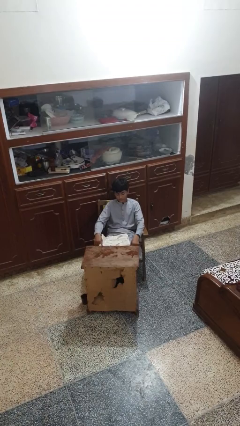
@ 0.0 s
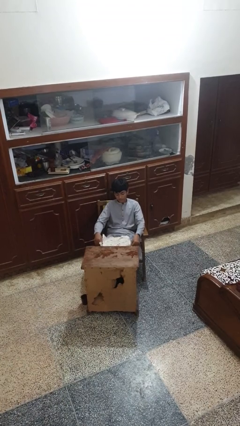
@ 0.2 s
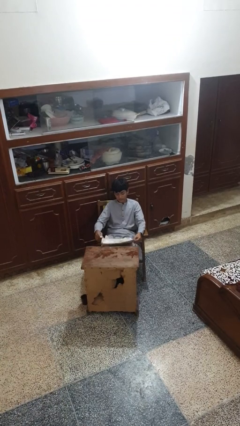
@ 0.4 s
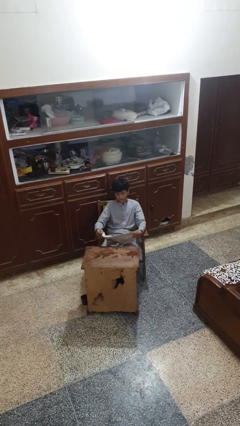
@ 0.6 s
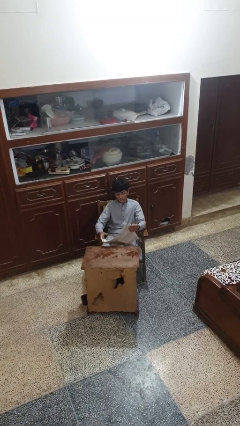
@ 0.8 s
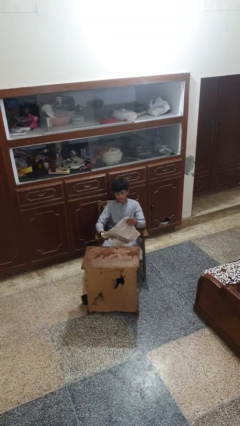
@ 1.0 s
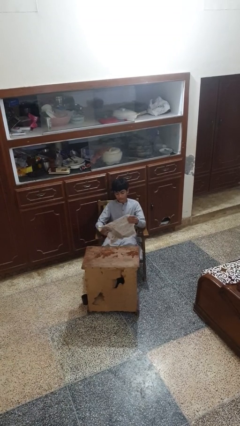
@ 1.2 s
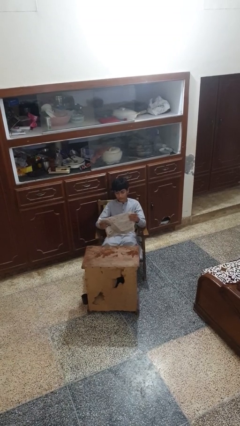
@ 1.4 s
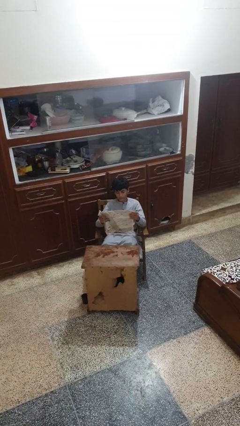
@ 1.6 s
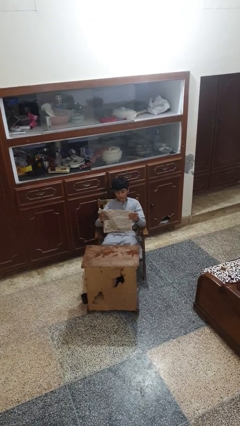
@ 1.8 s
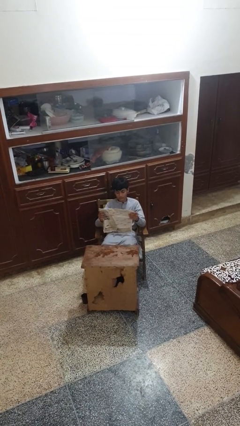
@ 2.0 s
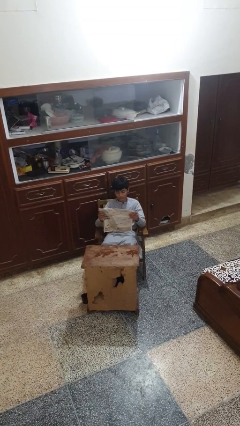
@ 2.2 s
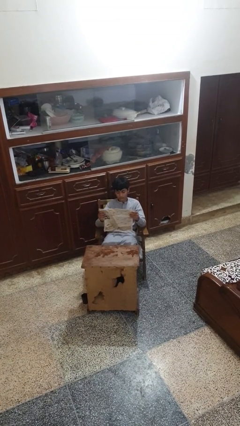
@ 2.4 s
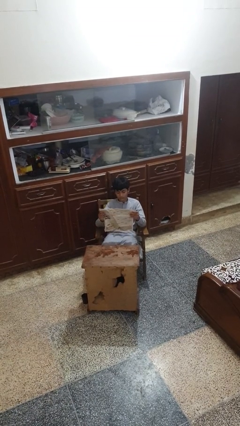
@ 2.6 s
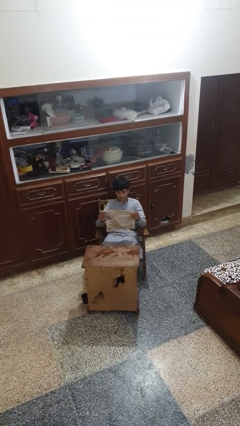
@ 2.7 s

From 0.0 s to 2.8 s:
person reads newspaper

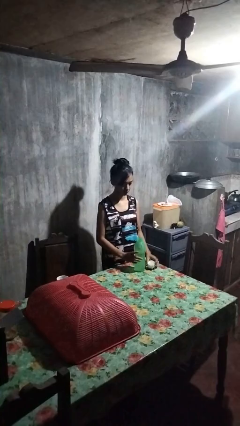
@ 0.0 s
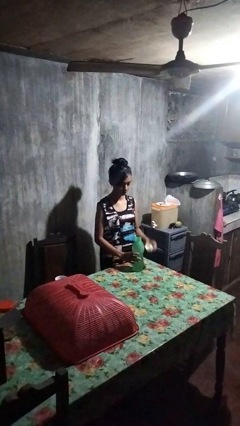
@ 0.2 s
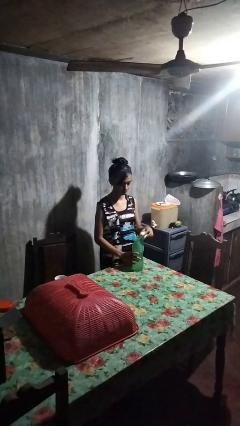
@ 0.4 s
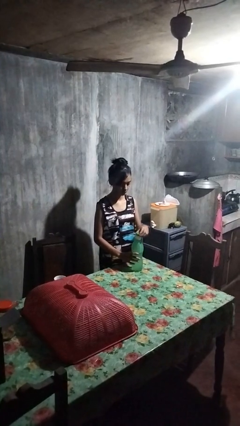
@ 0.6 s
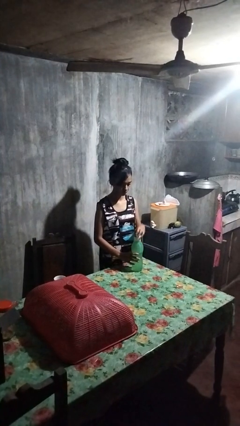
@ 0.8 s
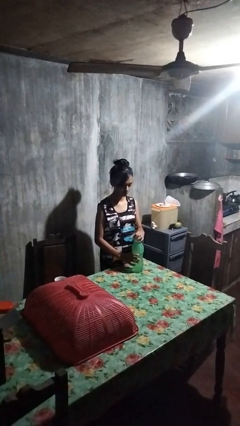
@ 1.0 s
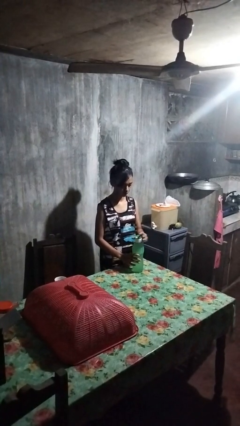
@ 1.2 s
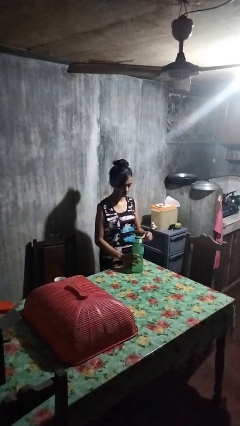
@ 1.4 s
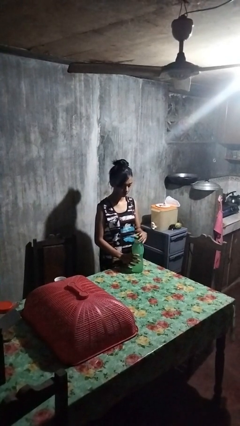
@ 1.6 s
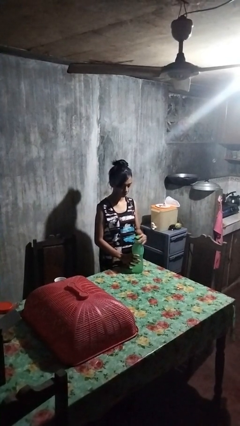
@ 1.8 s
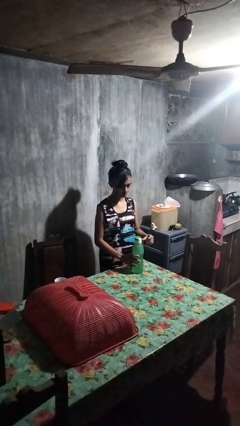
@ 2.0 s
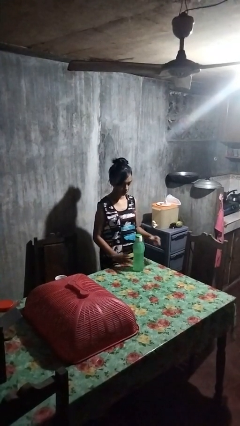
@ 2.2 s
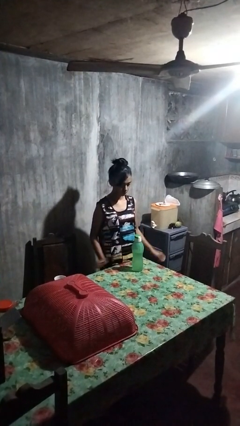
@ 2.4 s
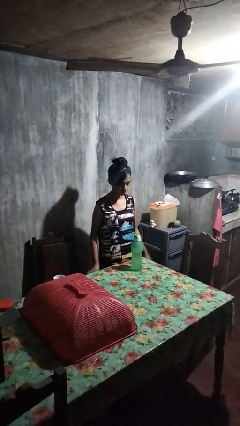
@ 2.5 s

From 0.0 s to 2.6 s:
person screws lid to bottle

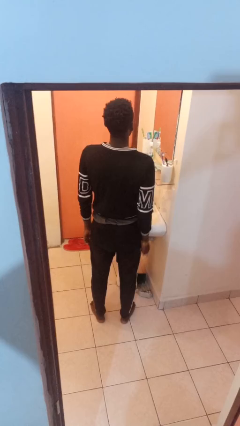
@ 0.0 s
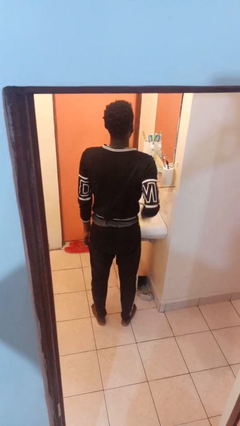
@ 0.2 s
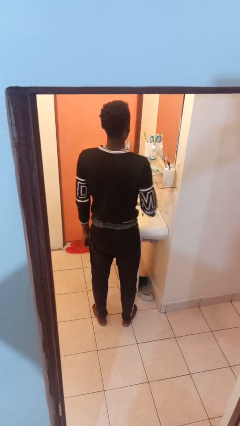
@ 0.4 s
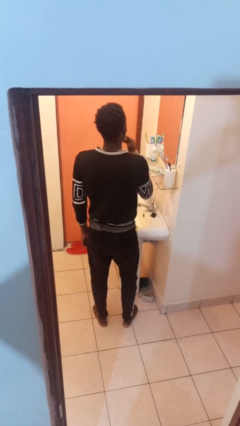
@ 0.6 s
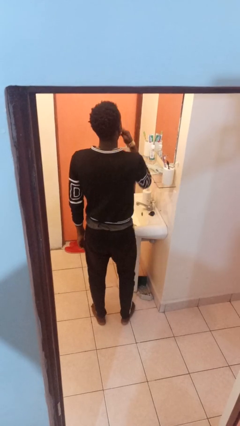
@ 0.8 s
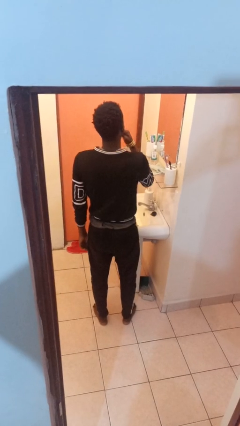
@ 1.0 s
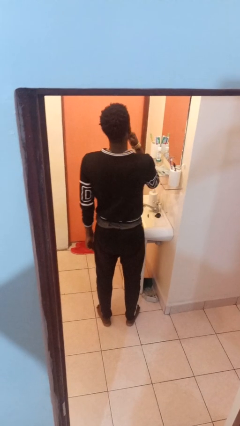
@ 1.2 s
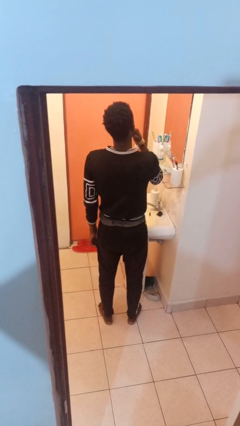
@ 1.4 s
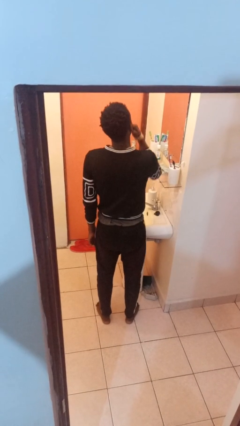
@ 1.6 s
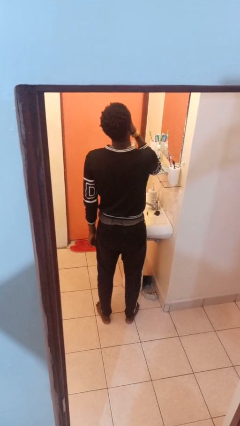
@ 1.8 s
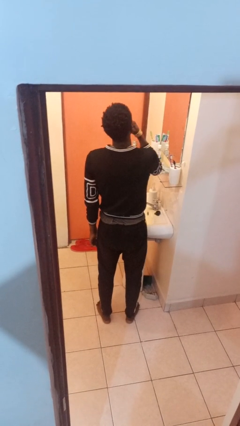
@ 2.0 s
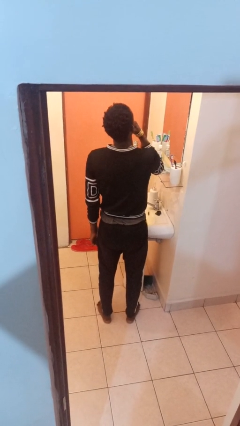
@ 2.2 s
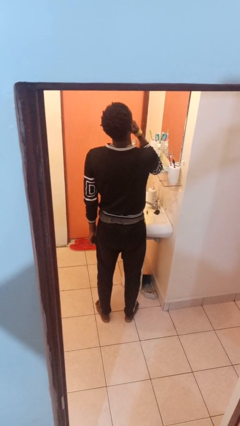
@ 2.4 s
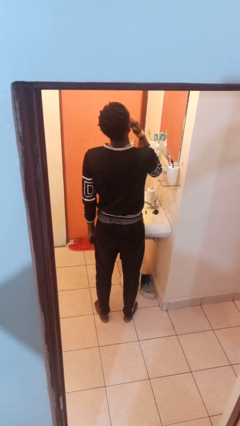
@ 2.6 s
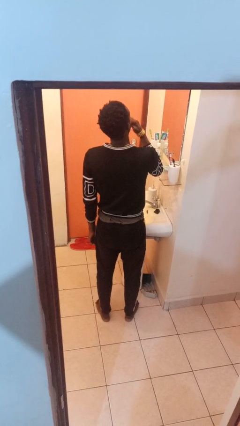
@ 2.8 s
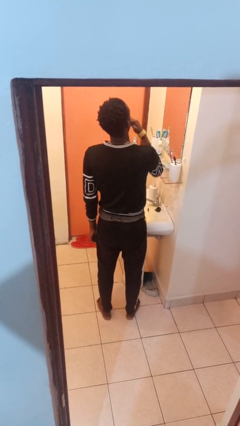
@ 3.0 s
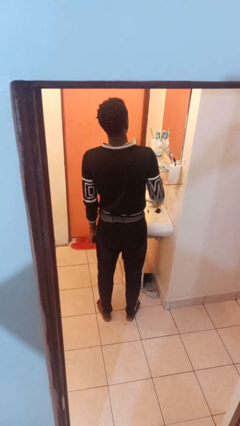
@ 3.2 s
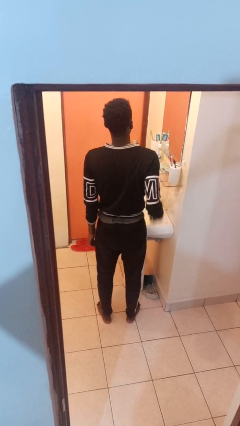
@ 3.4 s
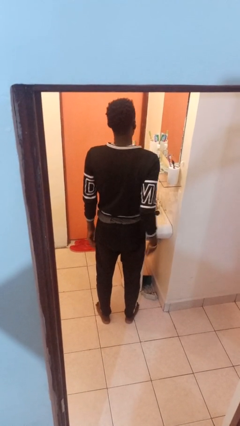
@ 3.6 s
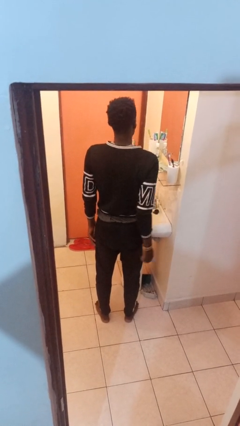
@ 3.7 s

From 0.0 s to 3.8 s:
person brushes teeth

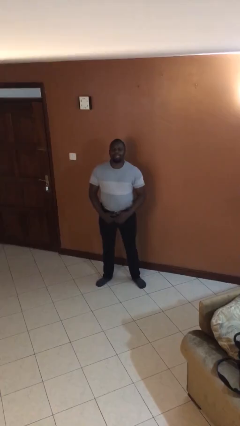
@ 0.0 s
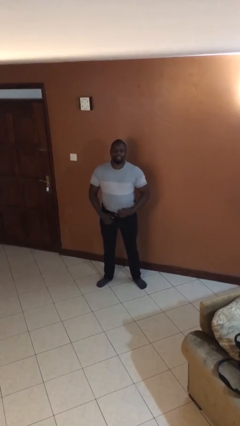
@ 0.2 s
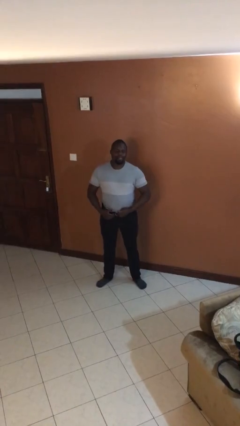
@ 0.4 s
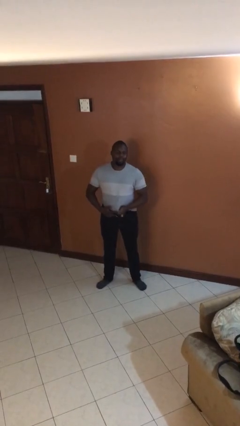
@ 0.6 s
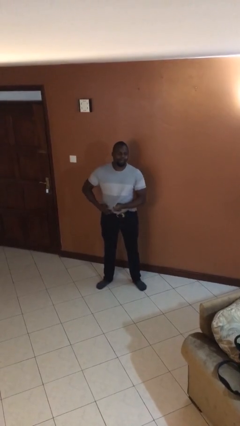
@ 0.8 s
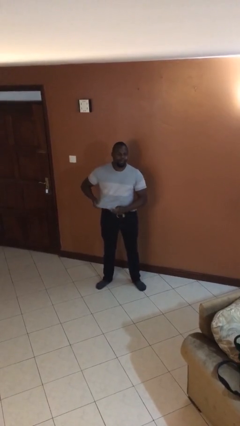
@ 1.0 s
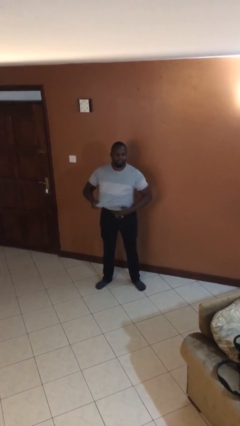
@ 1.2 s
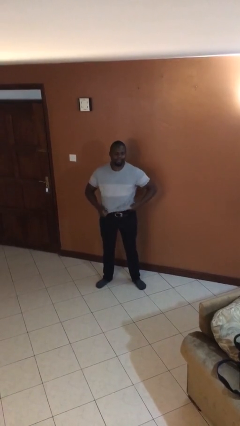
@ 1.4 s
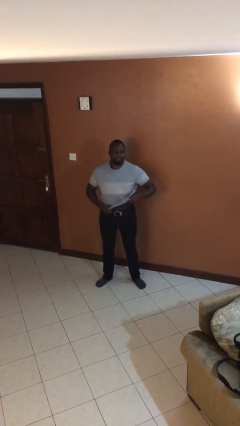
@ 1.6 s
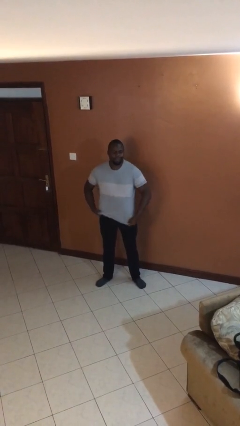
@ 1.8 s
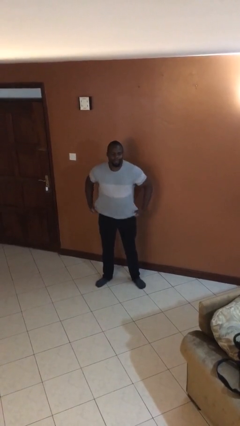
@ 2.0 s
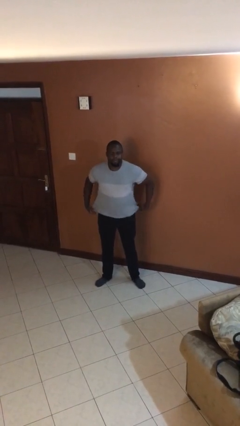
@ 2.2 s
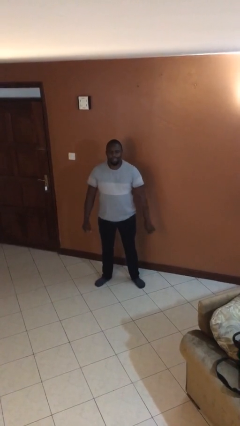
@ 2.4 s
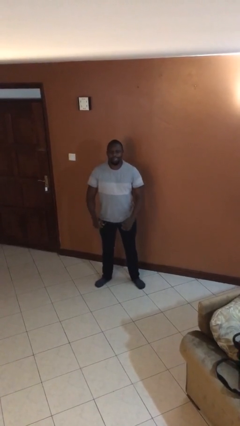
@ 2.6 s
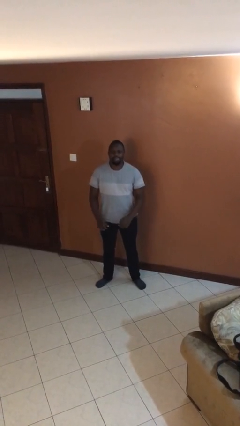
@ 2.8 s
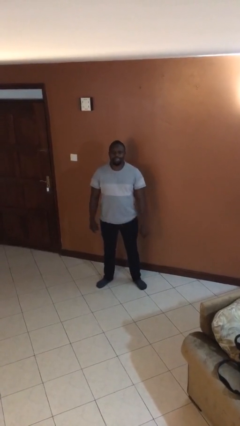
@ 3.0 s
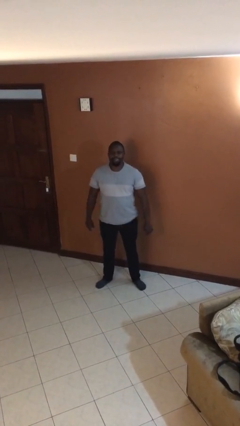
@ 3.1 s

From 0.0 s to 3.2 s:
person untucks shirt

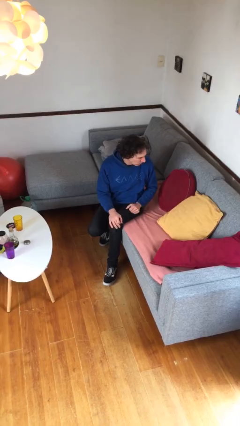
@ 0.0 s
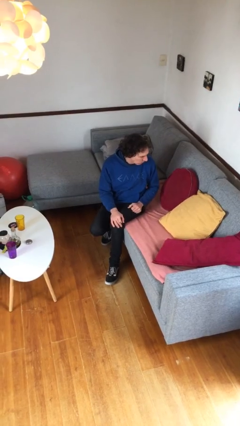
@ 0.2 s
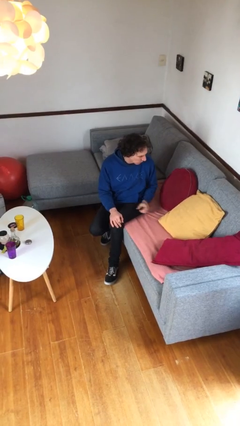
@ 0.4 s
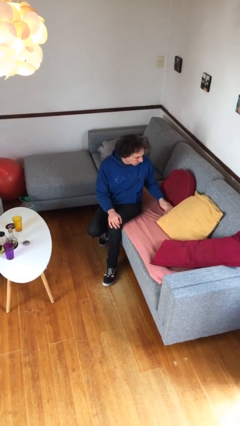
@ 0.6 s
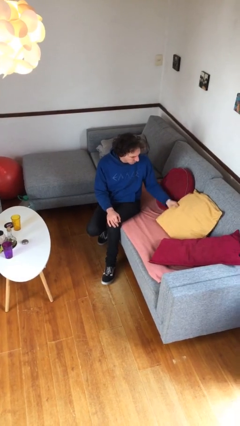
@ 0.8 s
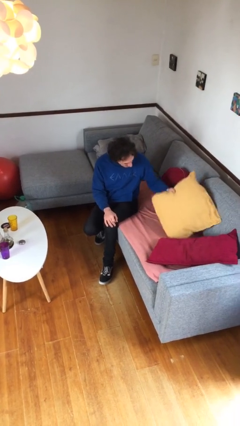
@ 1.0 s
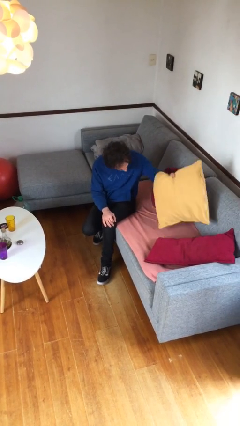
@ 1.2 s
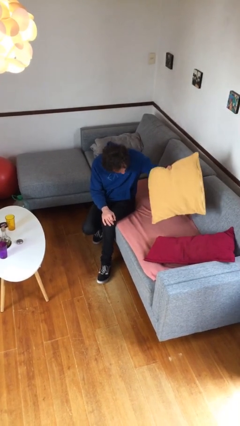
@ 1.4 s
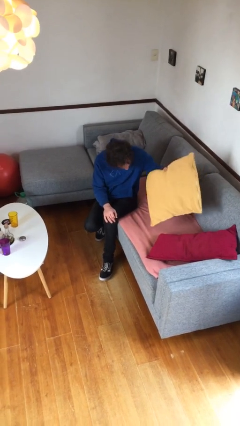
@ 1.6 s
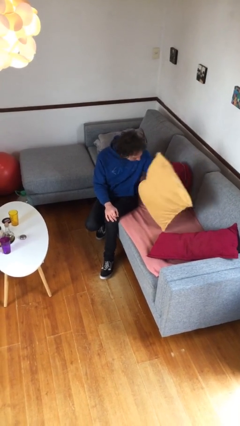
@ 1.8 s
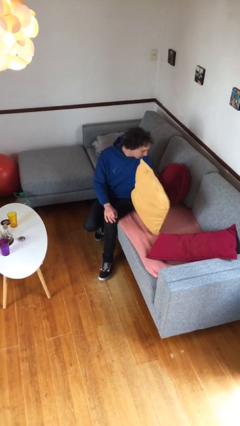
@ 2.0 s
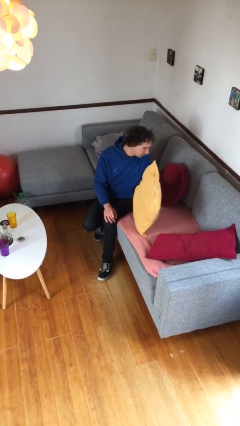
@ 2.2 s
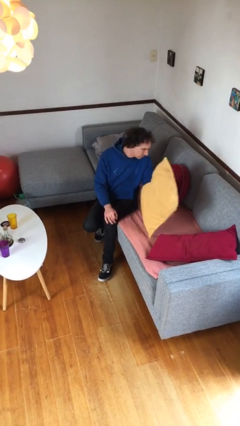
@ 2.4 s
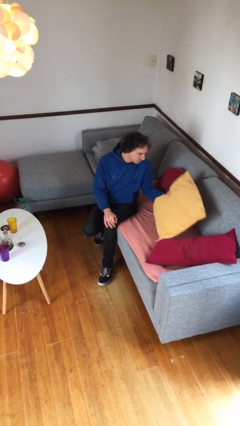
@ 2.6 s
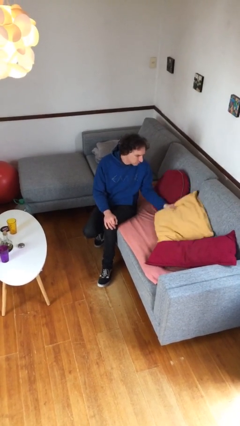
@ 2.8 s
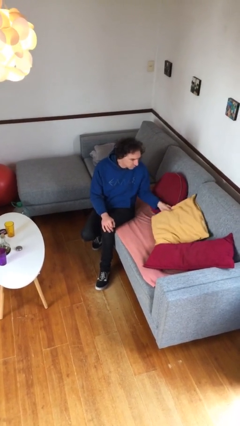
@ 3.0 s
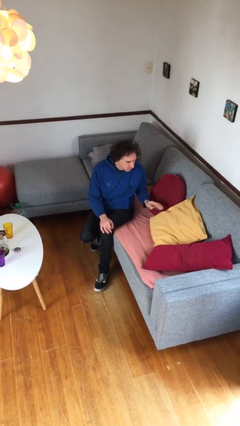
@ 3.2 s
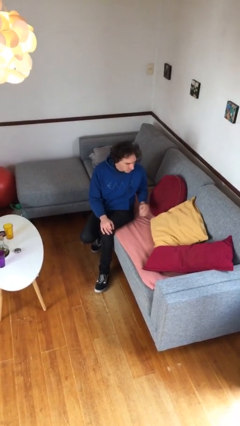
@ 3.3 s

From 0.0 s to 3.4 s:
person searches in couch

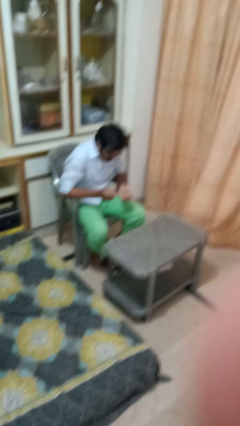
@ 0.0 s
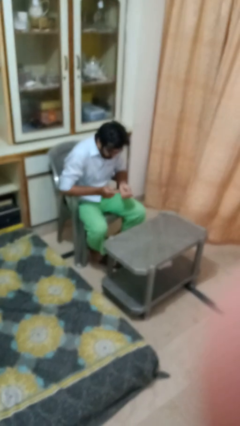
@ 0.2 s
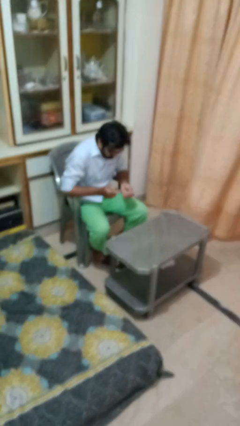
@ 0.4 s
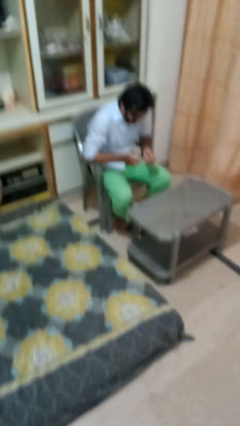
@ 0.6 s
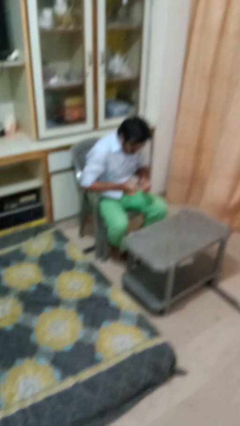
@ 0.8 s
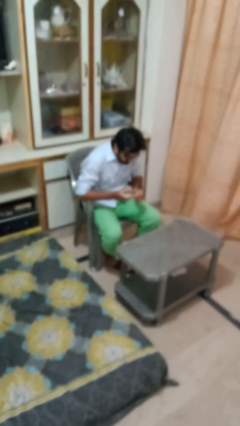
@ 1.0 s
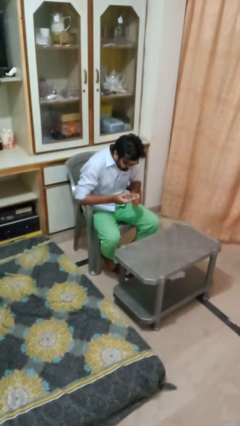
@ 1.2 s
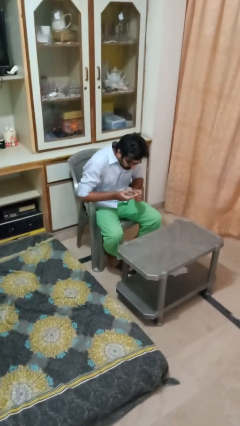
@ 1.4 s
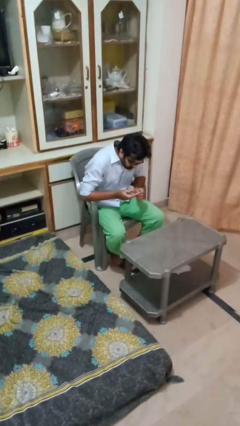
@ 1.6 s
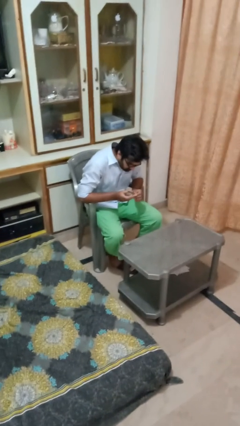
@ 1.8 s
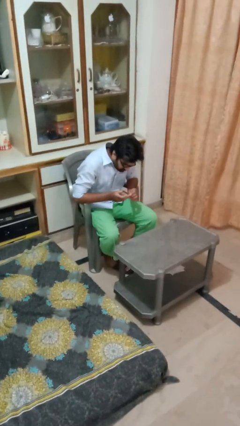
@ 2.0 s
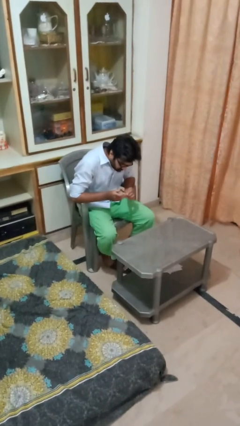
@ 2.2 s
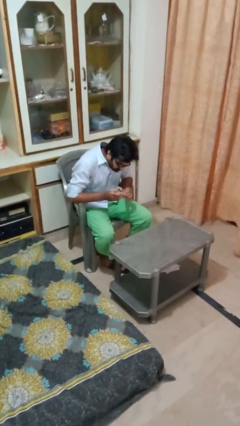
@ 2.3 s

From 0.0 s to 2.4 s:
person clips fingernails
